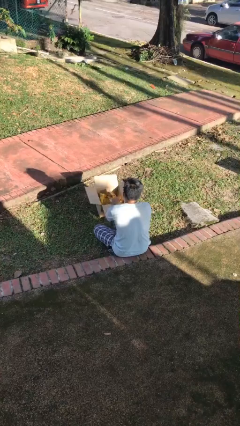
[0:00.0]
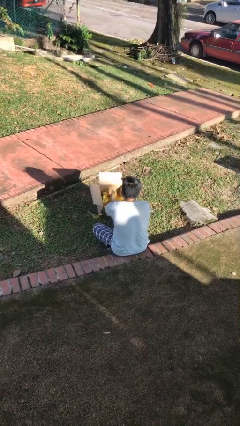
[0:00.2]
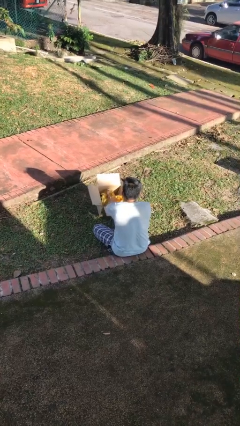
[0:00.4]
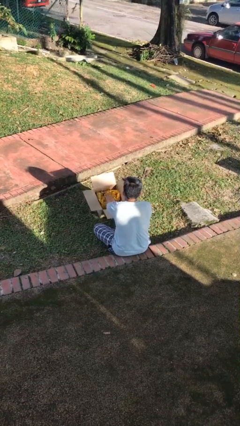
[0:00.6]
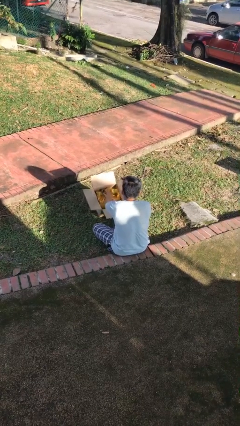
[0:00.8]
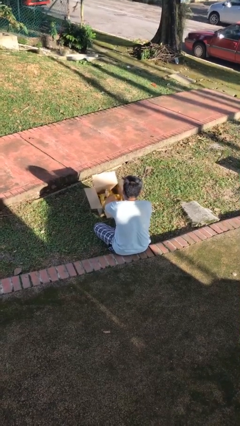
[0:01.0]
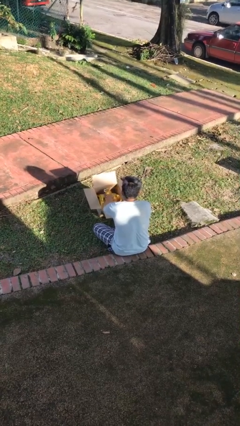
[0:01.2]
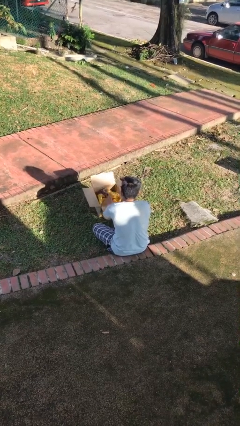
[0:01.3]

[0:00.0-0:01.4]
person searches in box

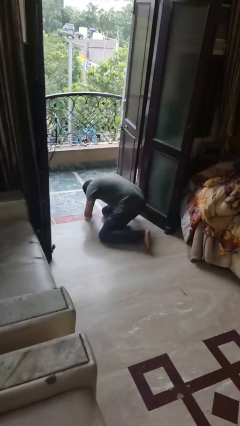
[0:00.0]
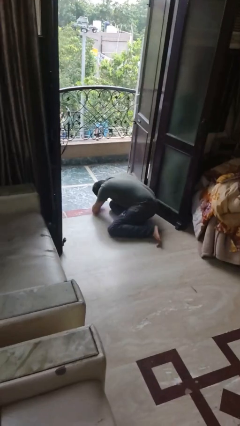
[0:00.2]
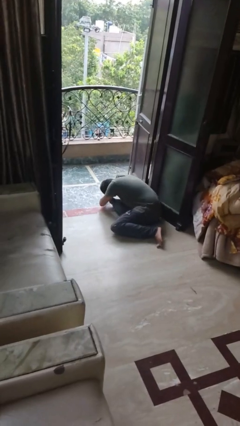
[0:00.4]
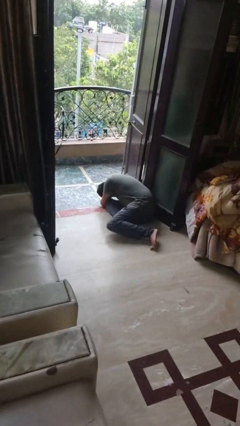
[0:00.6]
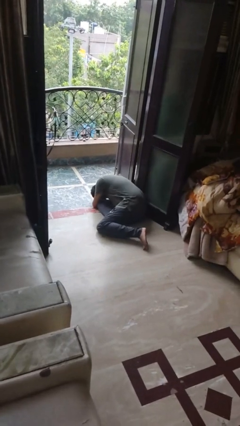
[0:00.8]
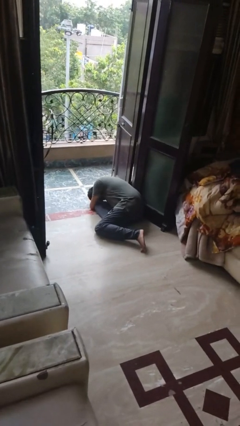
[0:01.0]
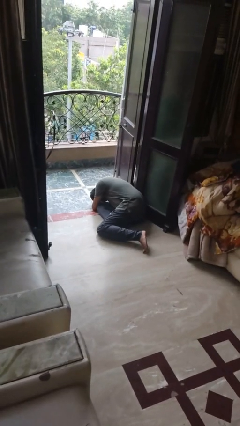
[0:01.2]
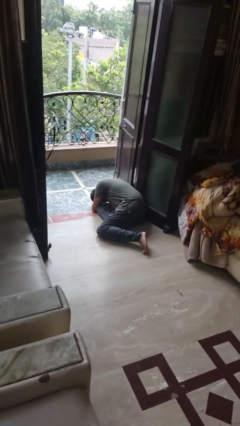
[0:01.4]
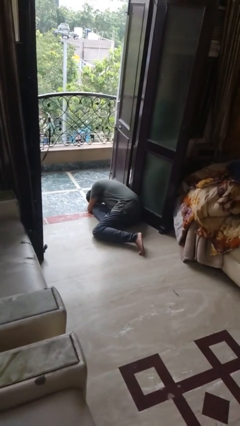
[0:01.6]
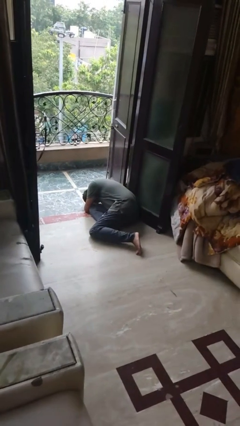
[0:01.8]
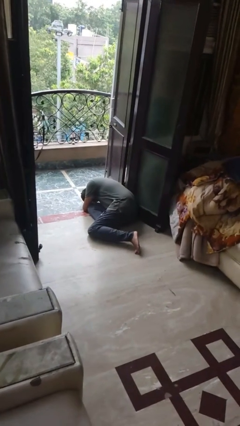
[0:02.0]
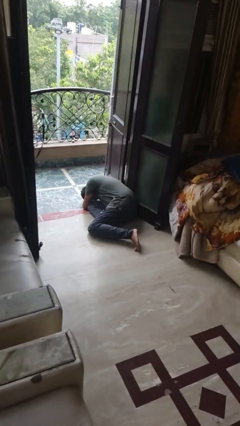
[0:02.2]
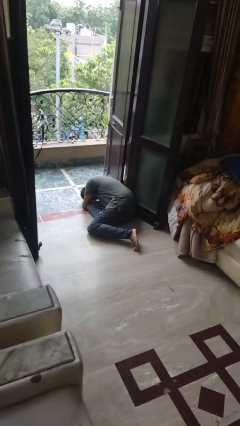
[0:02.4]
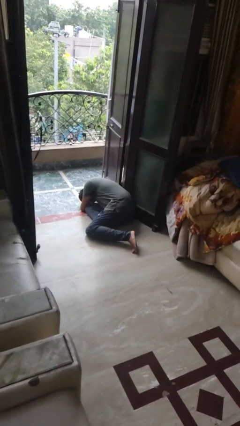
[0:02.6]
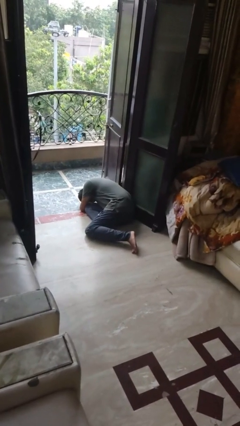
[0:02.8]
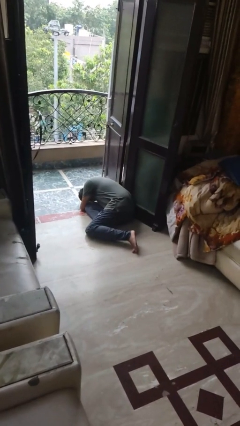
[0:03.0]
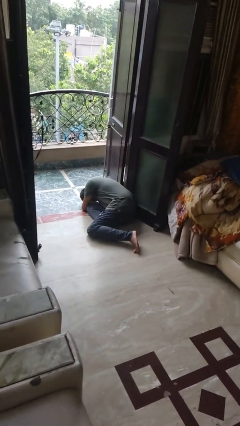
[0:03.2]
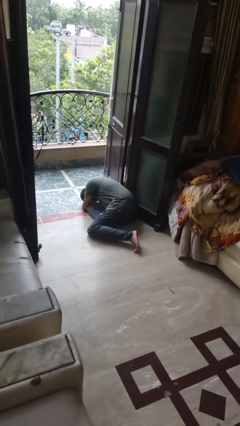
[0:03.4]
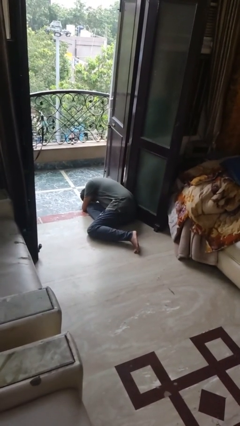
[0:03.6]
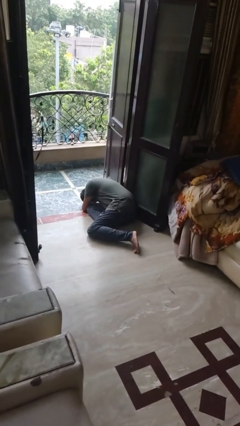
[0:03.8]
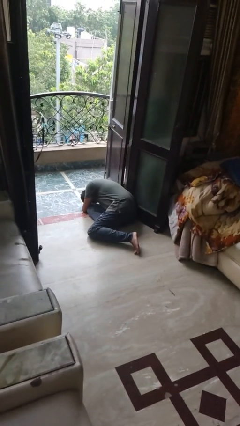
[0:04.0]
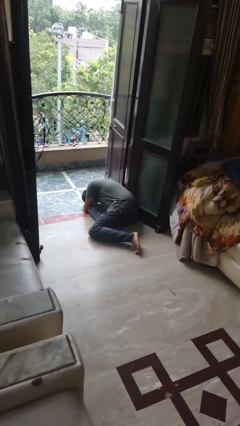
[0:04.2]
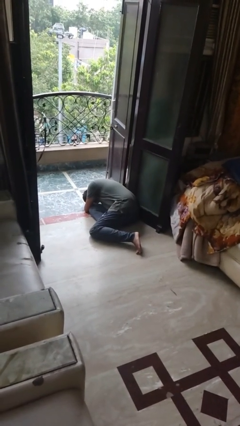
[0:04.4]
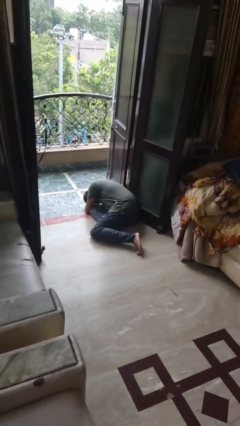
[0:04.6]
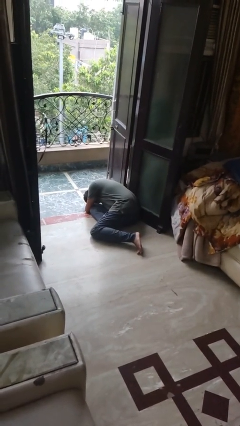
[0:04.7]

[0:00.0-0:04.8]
person lies down on floor

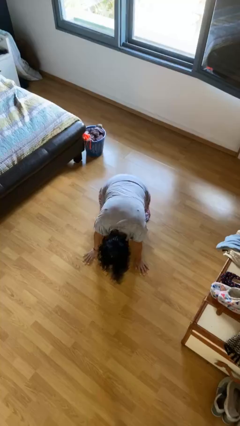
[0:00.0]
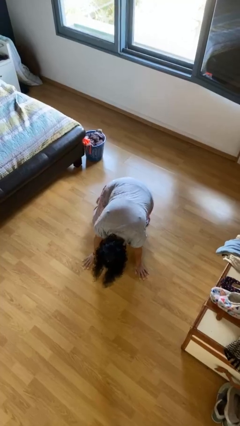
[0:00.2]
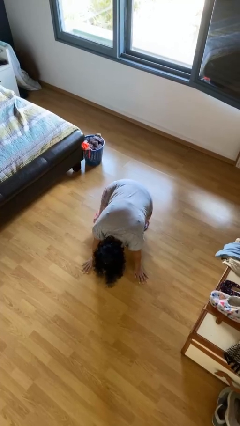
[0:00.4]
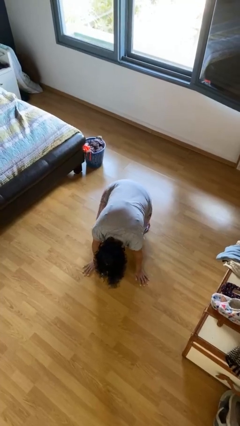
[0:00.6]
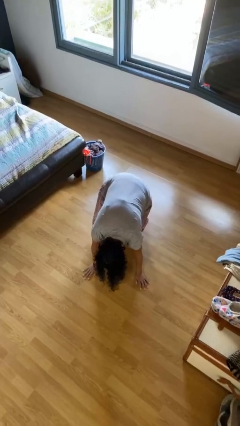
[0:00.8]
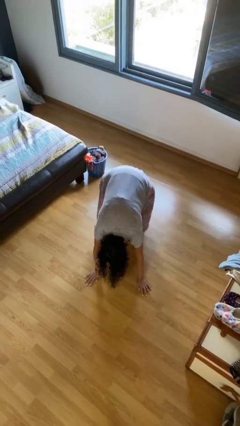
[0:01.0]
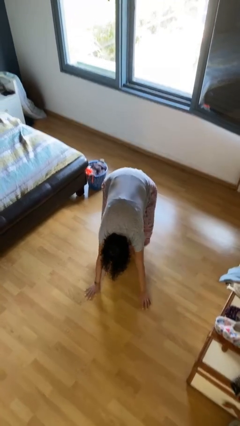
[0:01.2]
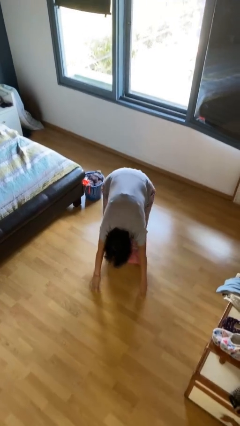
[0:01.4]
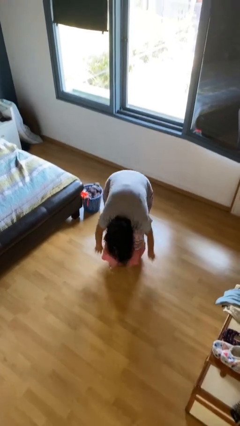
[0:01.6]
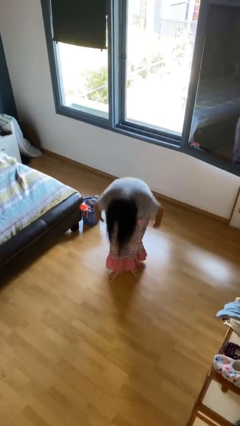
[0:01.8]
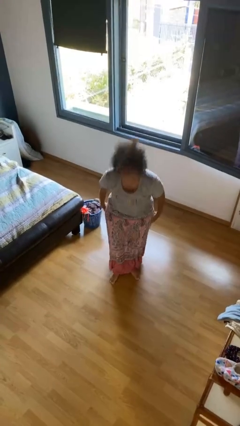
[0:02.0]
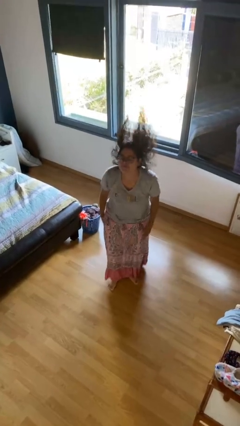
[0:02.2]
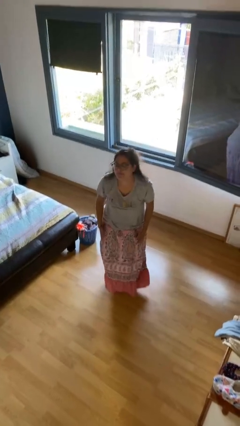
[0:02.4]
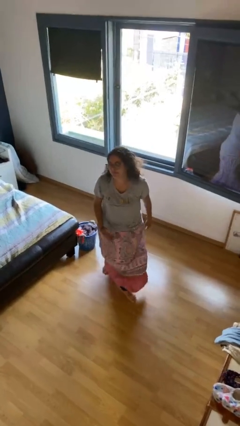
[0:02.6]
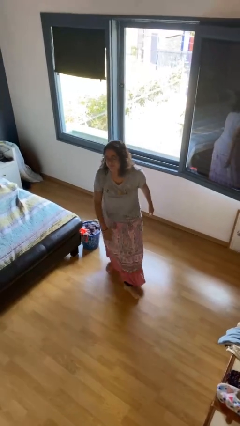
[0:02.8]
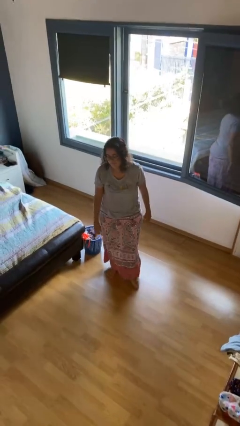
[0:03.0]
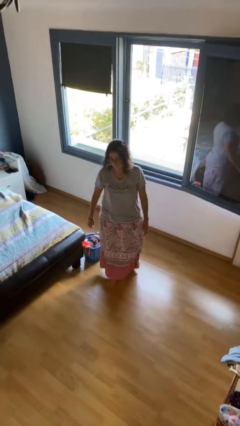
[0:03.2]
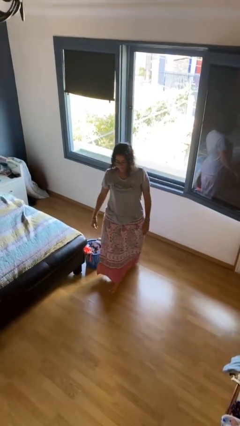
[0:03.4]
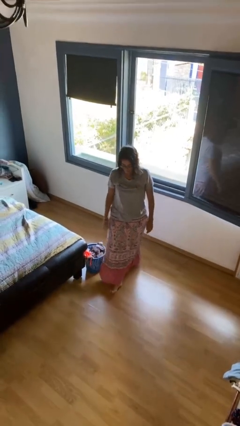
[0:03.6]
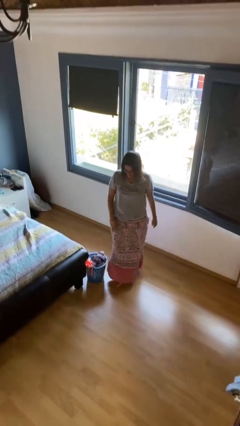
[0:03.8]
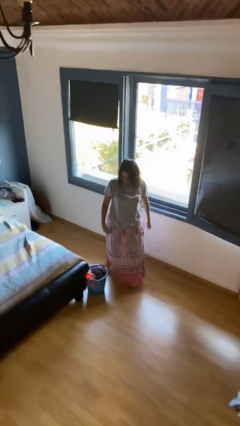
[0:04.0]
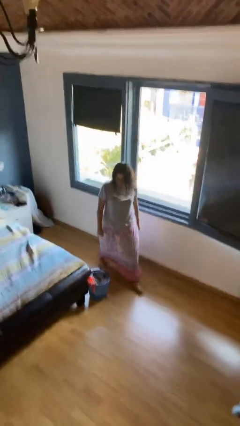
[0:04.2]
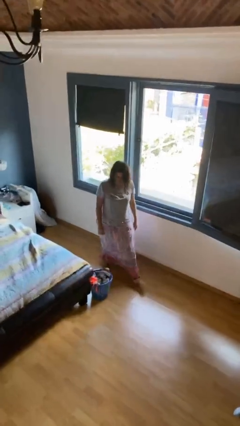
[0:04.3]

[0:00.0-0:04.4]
person stands up from floor

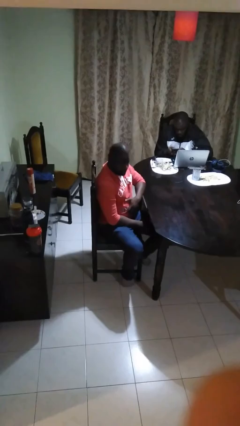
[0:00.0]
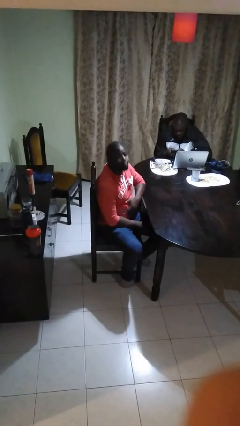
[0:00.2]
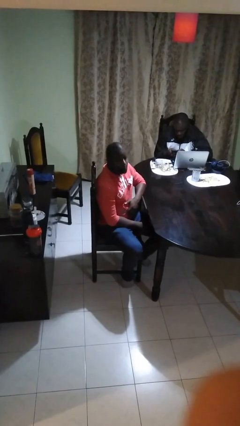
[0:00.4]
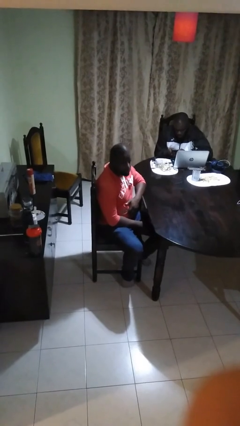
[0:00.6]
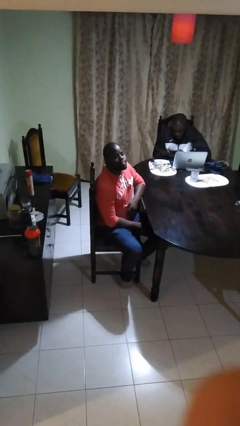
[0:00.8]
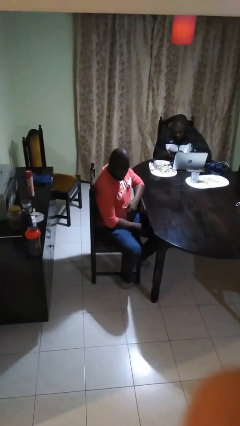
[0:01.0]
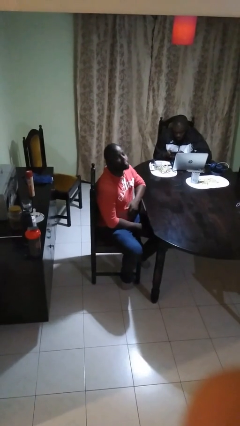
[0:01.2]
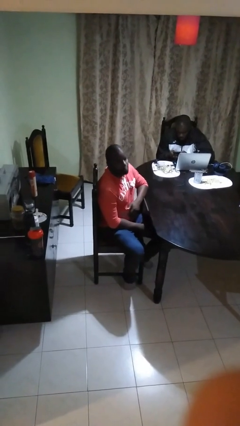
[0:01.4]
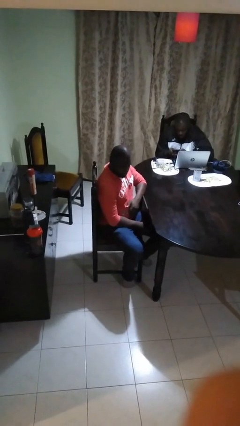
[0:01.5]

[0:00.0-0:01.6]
person nods head

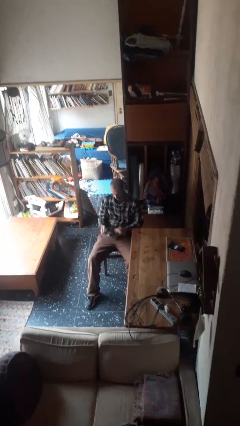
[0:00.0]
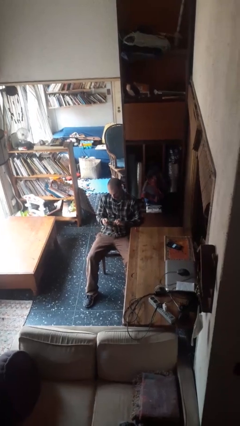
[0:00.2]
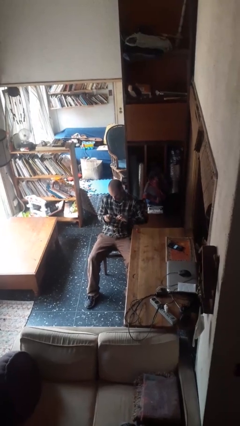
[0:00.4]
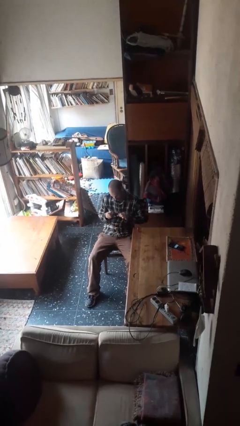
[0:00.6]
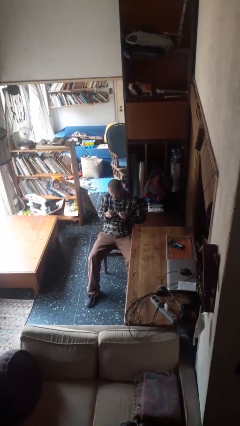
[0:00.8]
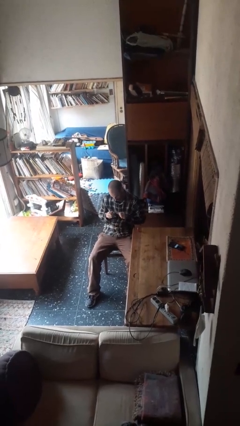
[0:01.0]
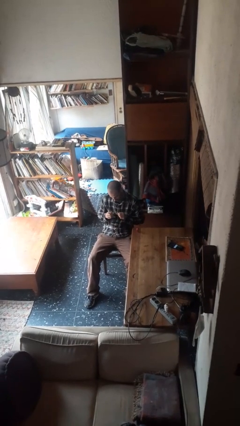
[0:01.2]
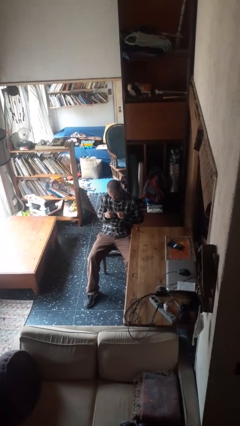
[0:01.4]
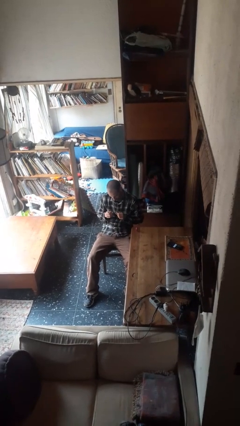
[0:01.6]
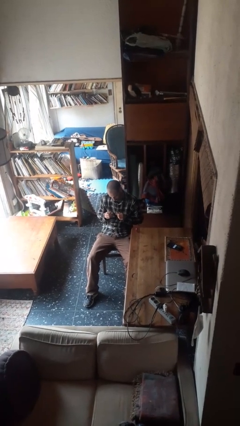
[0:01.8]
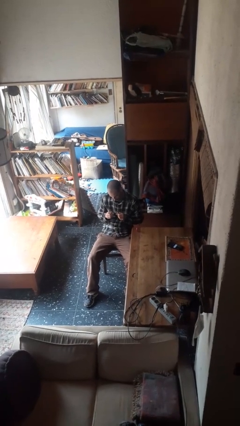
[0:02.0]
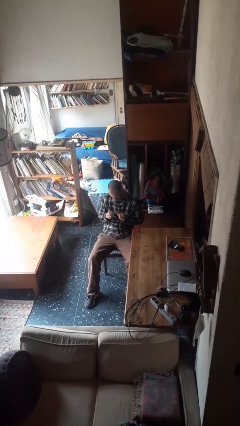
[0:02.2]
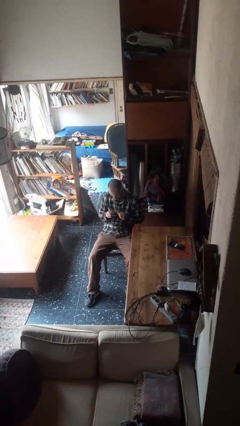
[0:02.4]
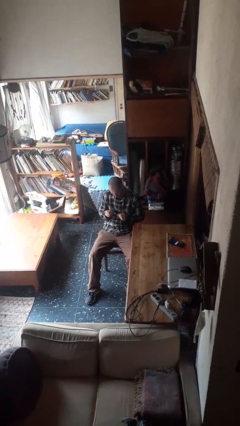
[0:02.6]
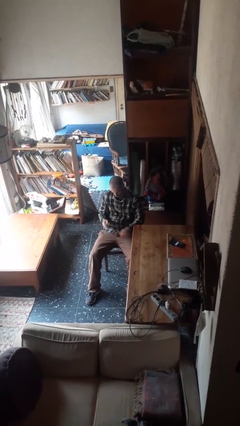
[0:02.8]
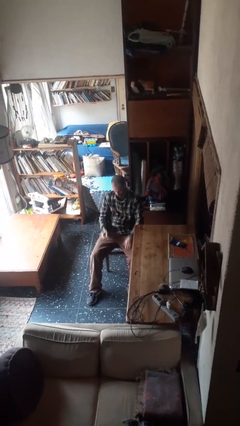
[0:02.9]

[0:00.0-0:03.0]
person paints fingernails

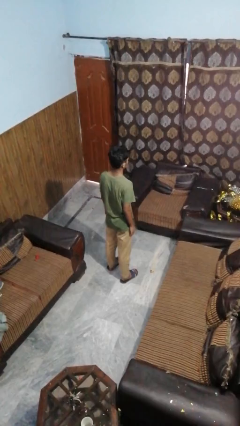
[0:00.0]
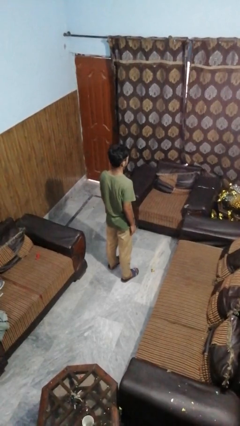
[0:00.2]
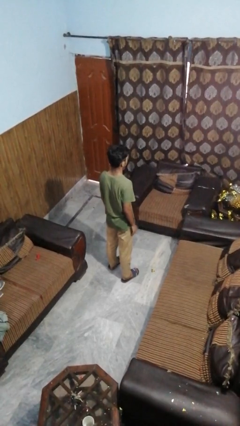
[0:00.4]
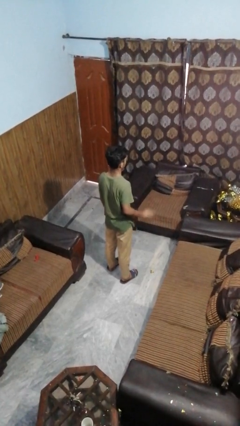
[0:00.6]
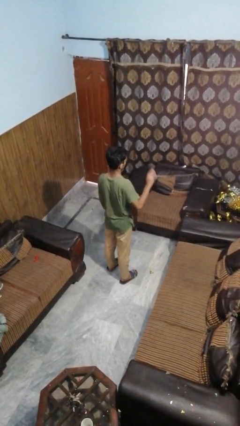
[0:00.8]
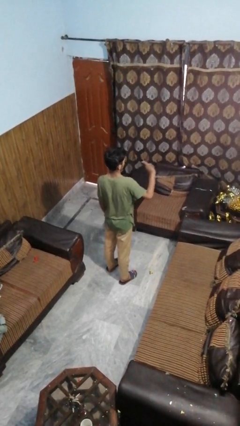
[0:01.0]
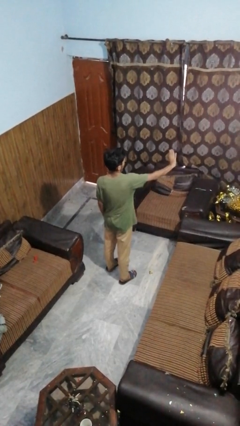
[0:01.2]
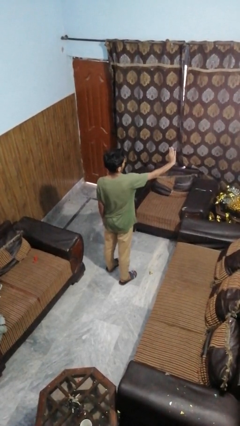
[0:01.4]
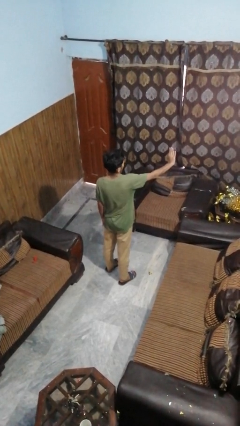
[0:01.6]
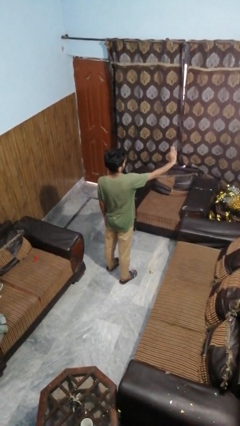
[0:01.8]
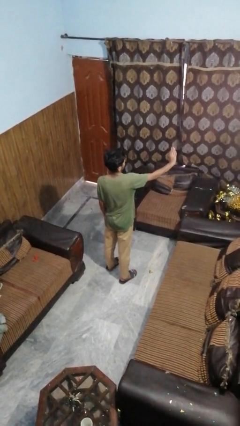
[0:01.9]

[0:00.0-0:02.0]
person gestures stop

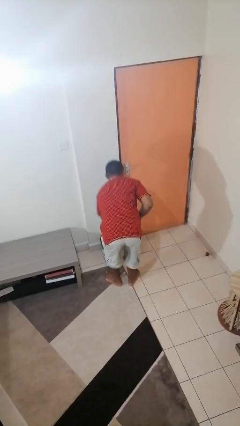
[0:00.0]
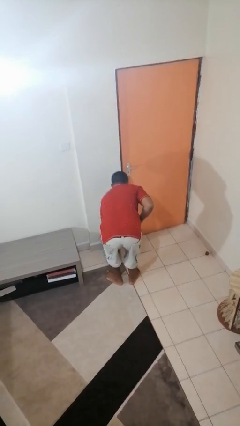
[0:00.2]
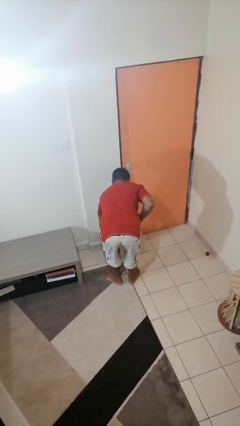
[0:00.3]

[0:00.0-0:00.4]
person discards trash
